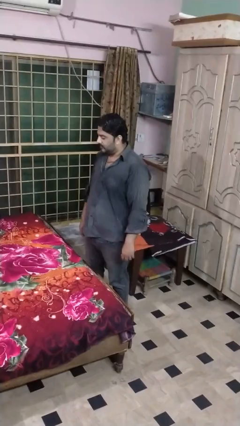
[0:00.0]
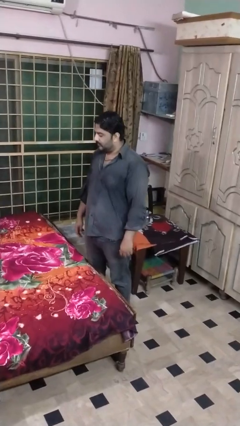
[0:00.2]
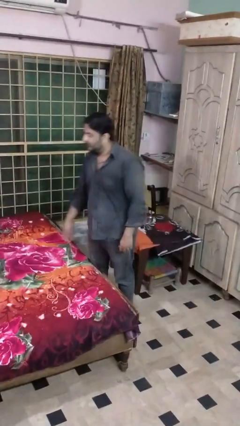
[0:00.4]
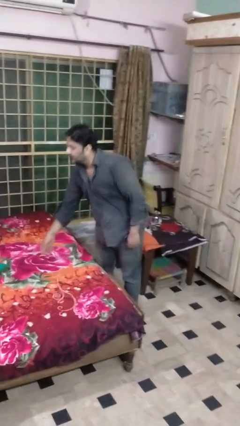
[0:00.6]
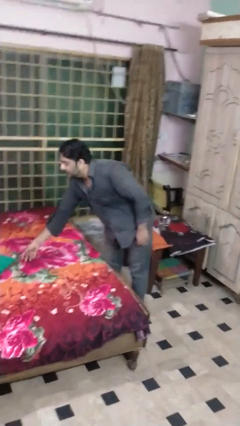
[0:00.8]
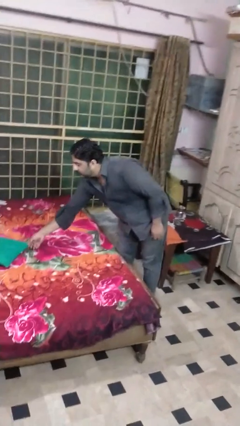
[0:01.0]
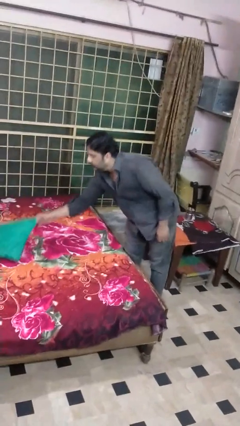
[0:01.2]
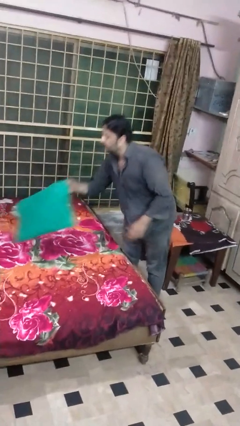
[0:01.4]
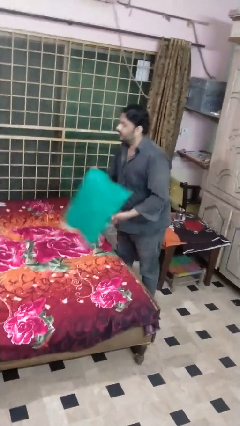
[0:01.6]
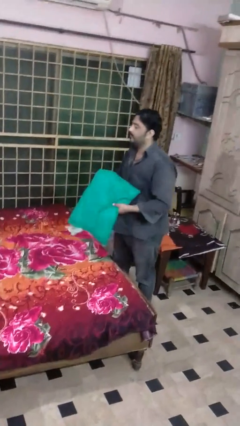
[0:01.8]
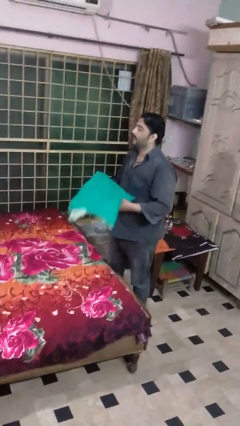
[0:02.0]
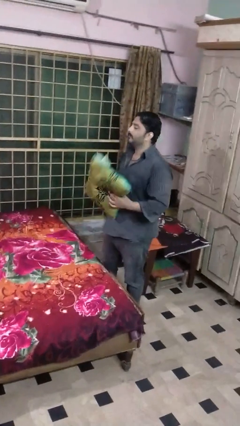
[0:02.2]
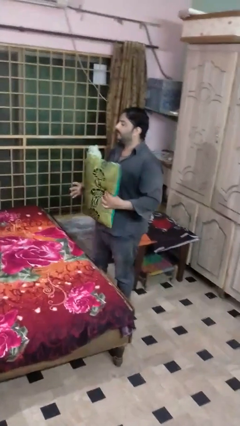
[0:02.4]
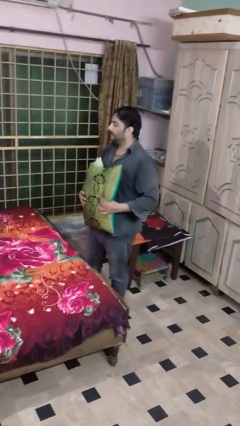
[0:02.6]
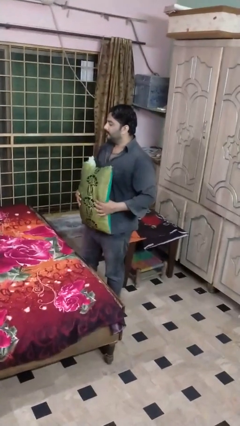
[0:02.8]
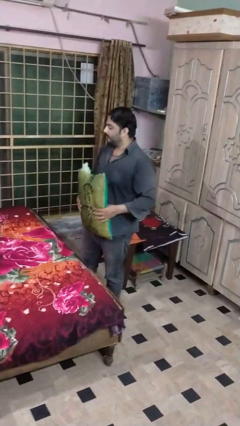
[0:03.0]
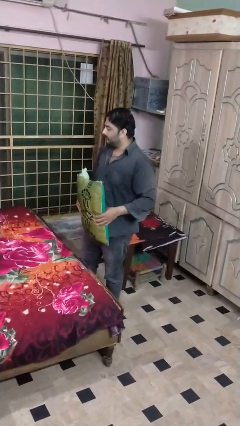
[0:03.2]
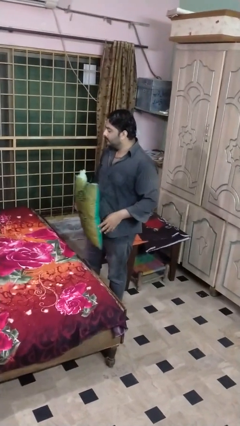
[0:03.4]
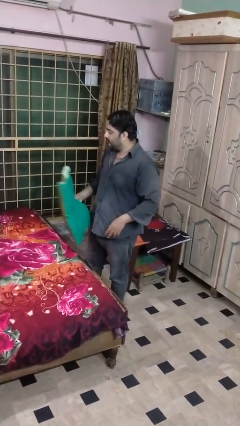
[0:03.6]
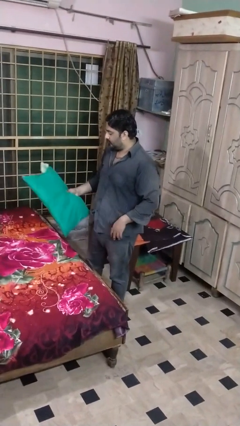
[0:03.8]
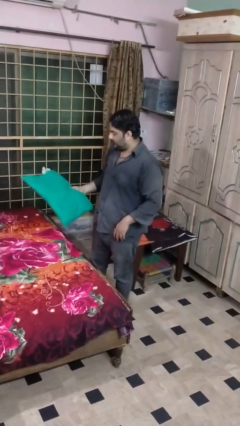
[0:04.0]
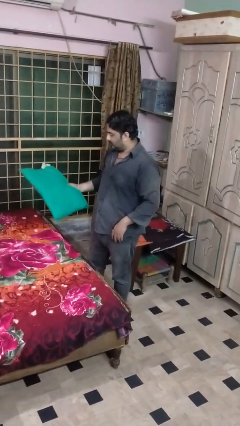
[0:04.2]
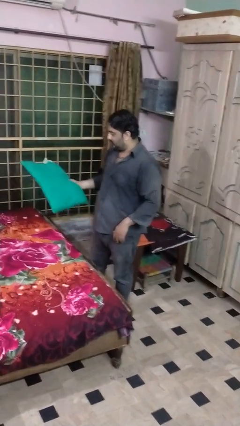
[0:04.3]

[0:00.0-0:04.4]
person picks up object from bed

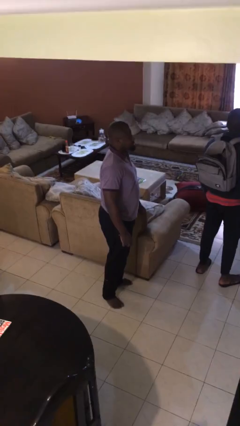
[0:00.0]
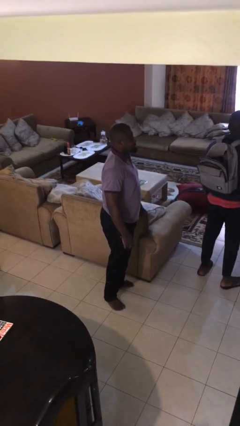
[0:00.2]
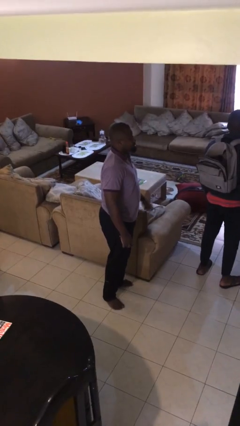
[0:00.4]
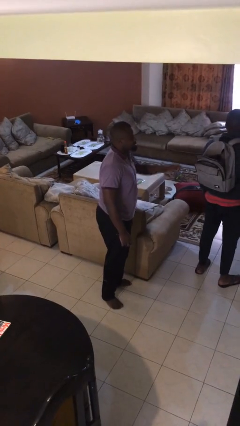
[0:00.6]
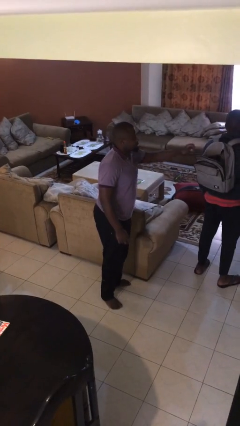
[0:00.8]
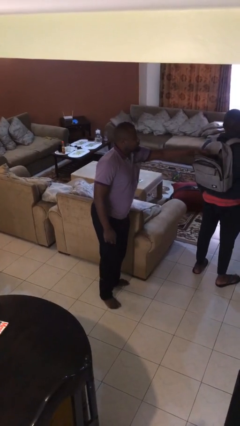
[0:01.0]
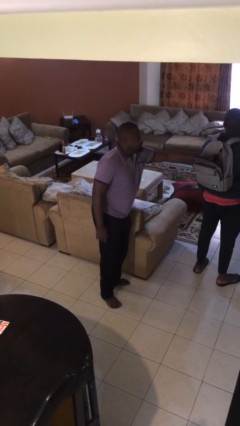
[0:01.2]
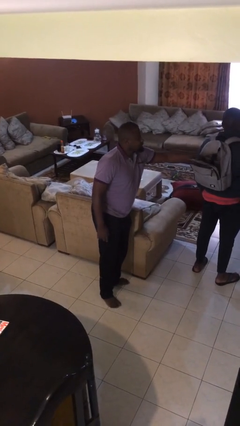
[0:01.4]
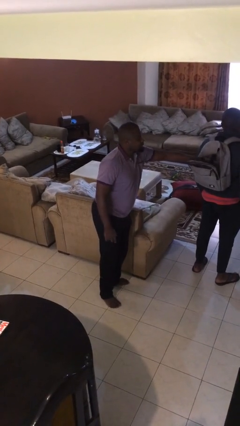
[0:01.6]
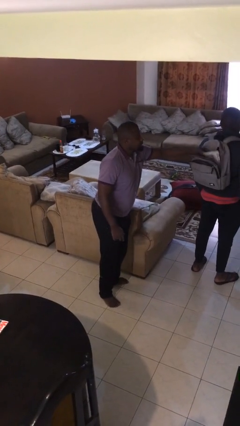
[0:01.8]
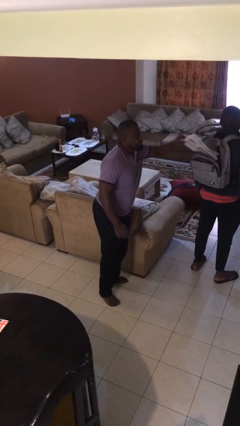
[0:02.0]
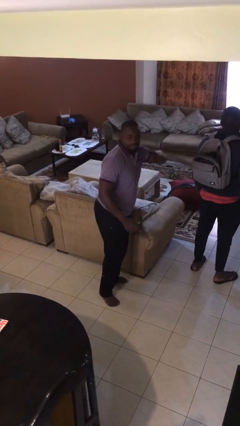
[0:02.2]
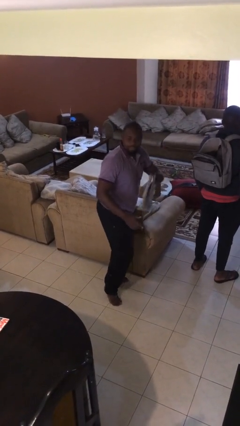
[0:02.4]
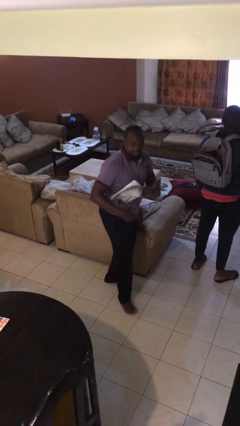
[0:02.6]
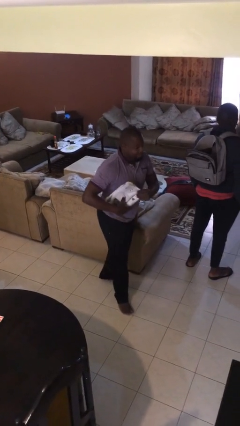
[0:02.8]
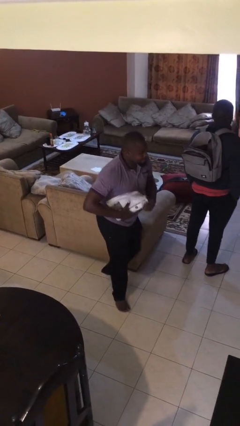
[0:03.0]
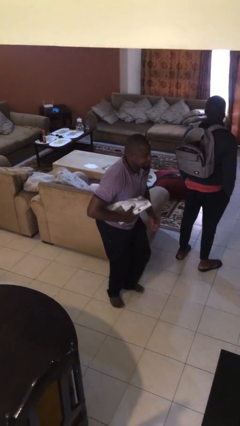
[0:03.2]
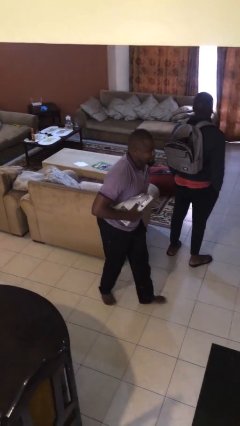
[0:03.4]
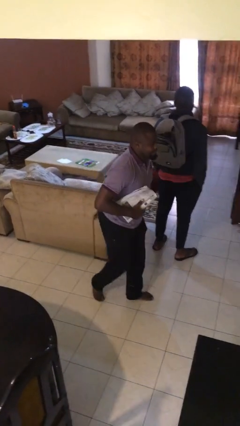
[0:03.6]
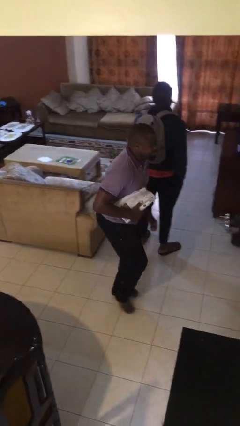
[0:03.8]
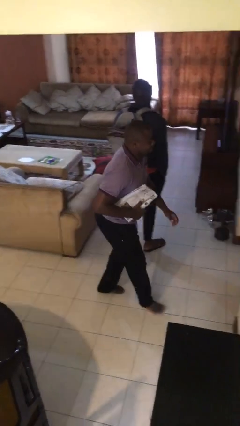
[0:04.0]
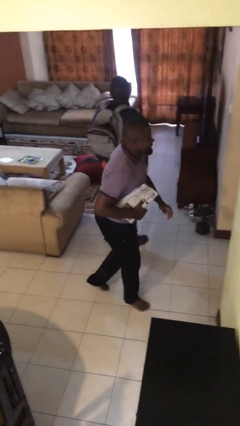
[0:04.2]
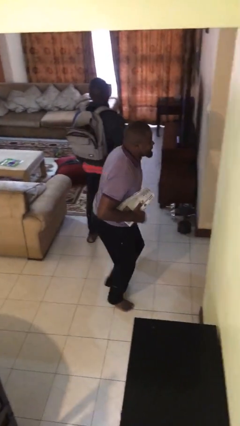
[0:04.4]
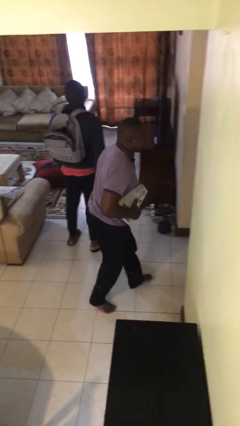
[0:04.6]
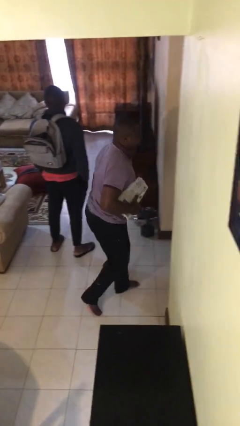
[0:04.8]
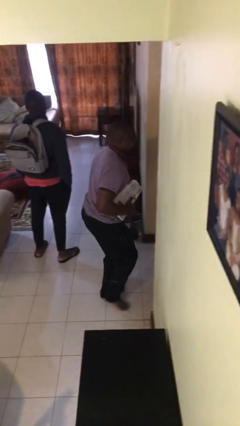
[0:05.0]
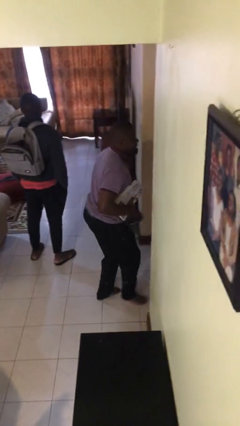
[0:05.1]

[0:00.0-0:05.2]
person steals object from person

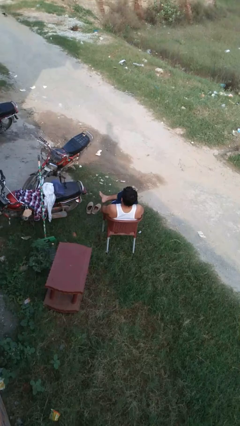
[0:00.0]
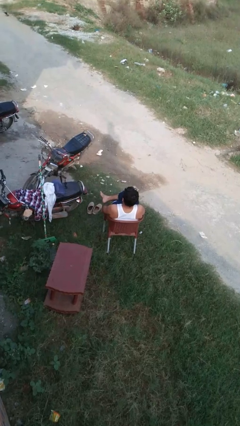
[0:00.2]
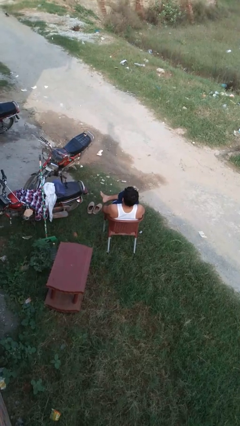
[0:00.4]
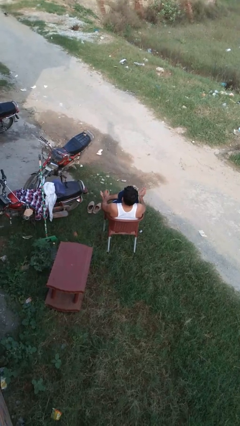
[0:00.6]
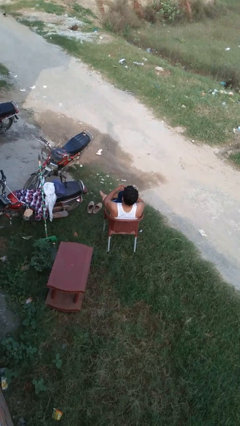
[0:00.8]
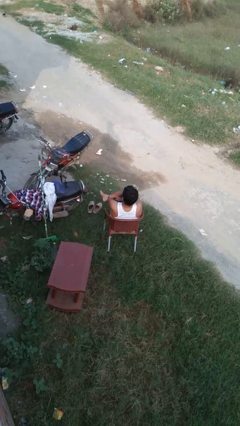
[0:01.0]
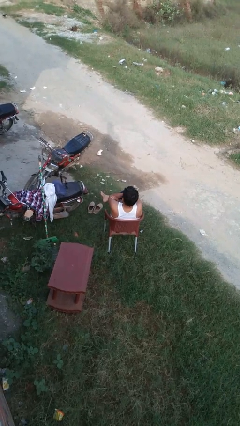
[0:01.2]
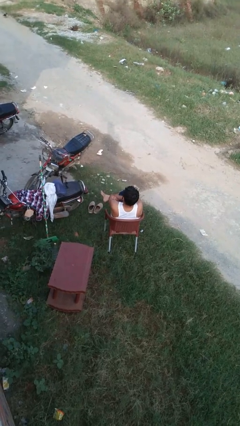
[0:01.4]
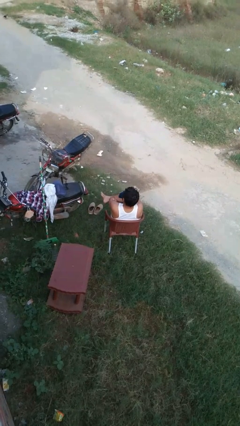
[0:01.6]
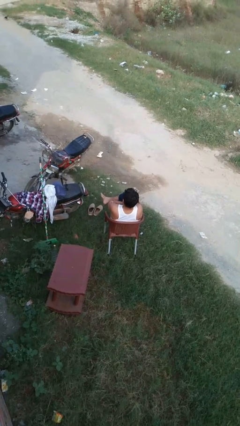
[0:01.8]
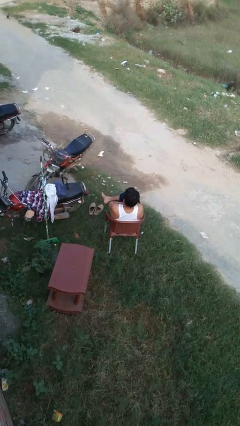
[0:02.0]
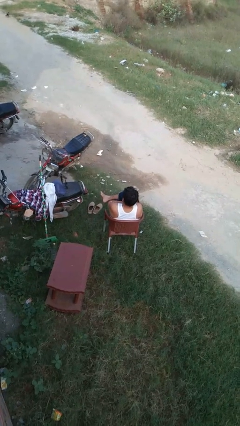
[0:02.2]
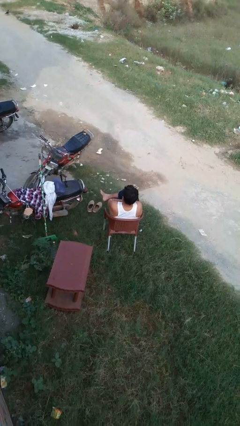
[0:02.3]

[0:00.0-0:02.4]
person crosses arms

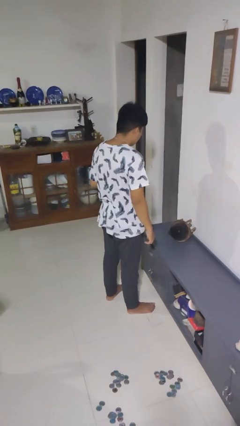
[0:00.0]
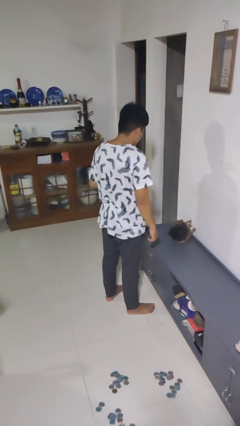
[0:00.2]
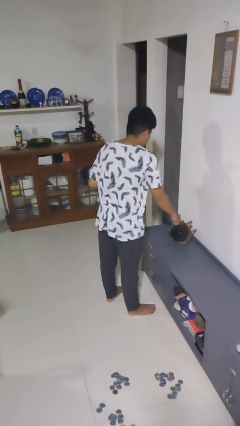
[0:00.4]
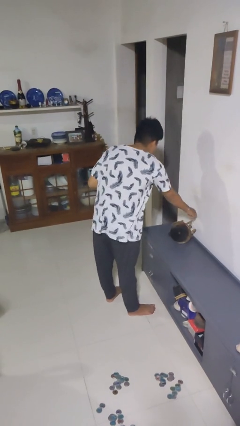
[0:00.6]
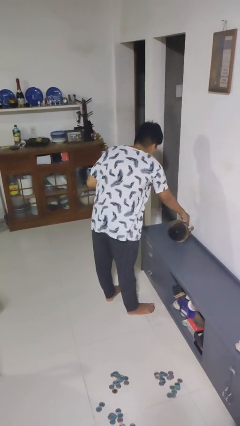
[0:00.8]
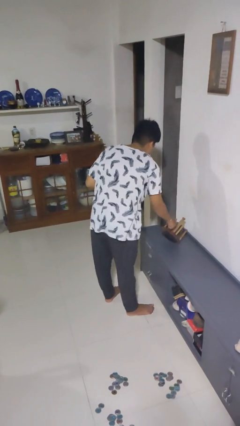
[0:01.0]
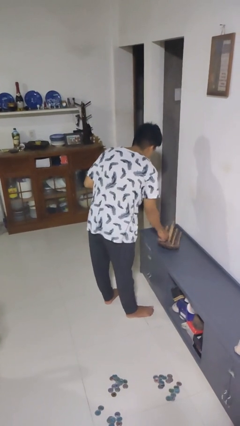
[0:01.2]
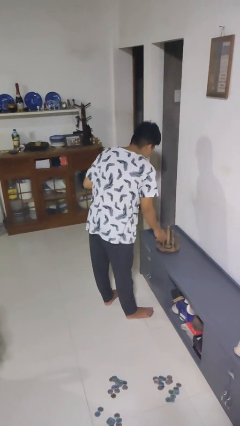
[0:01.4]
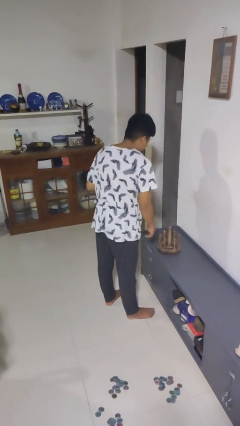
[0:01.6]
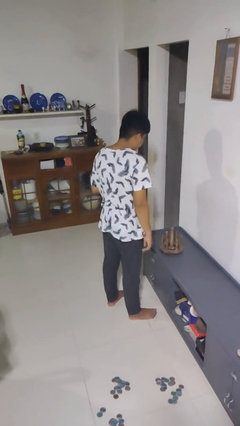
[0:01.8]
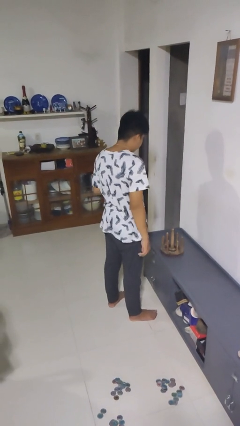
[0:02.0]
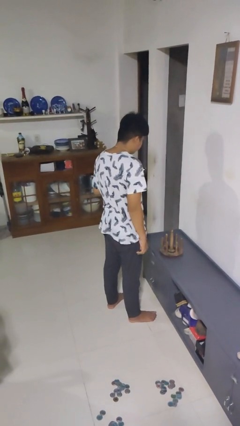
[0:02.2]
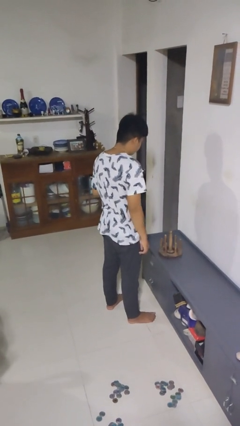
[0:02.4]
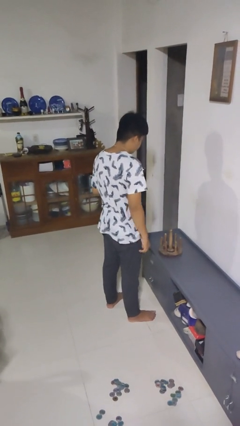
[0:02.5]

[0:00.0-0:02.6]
person sets upright furniture

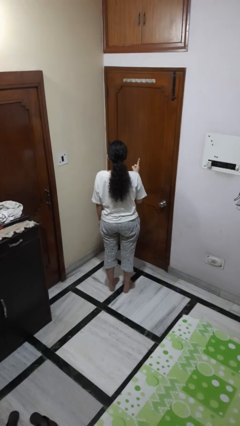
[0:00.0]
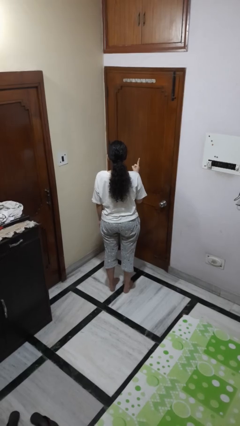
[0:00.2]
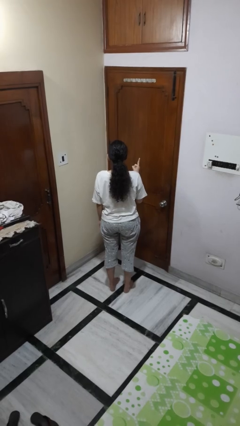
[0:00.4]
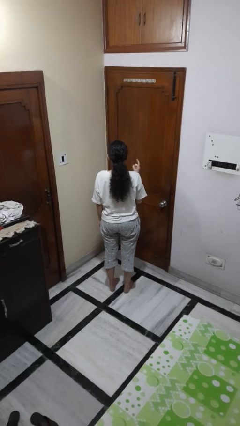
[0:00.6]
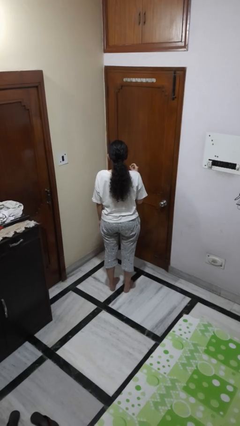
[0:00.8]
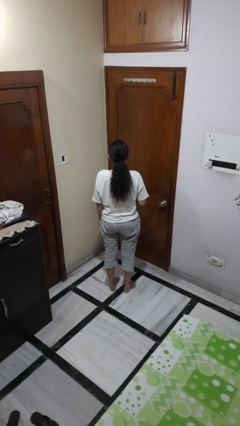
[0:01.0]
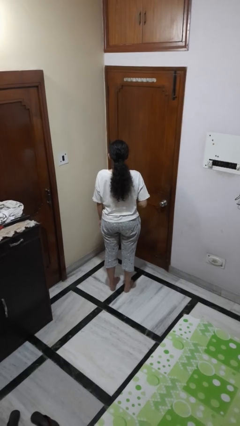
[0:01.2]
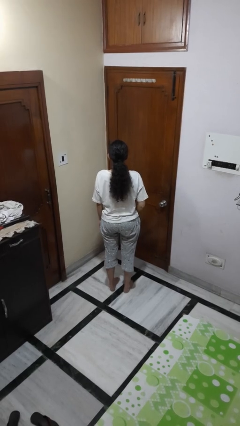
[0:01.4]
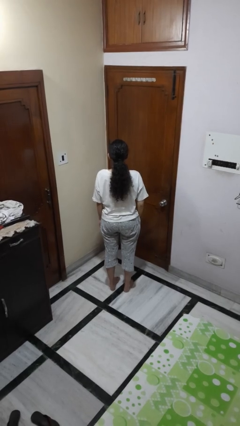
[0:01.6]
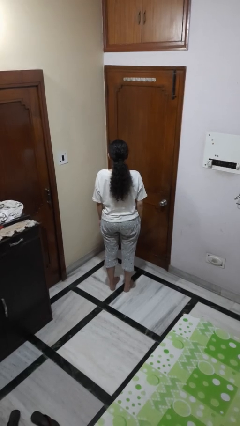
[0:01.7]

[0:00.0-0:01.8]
person gestures number one

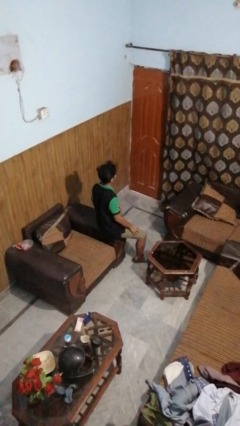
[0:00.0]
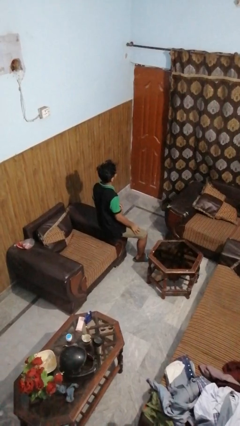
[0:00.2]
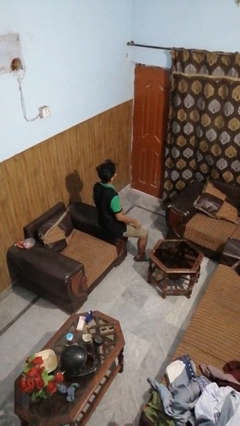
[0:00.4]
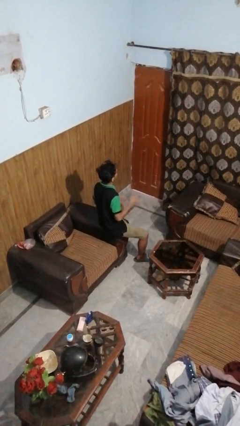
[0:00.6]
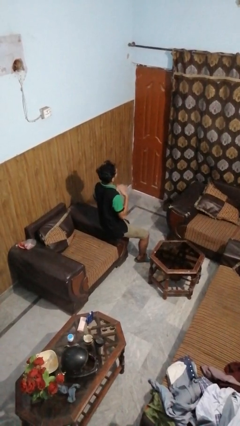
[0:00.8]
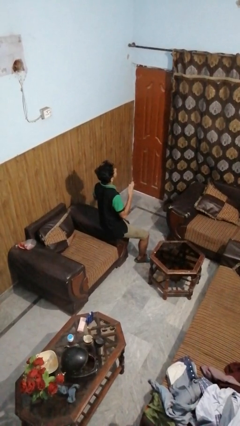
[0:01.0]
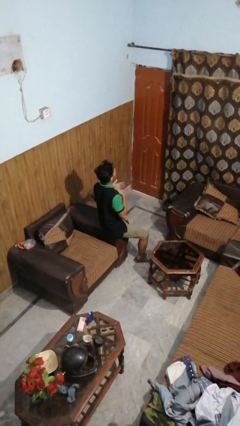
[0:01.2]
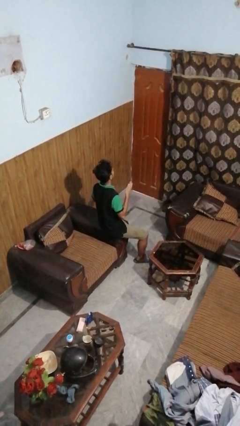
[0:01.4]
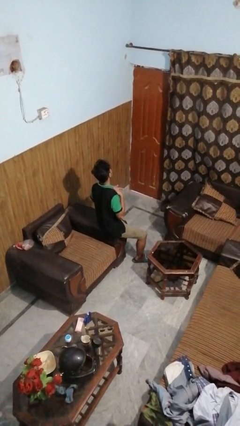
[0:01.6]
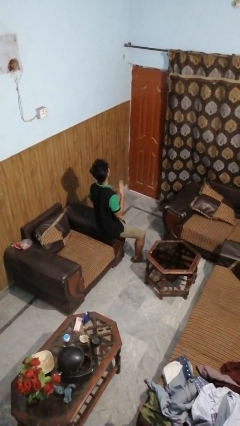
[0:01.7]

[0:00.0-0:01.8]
person drums on chest
